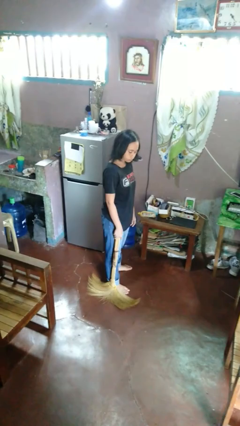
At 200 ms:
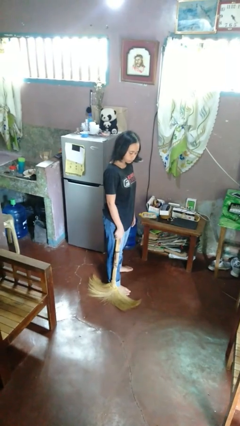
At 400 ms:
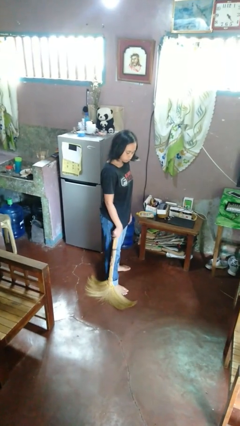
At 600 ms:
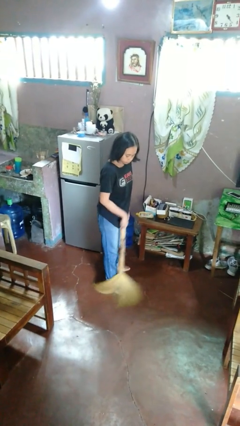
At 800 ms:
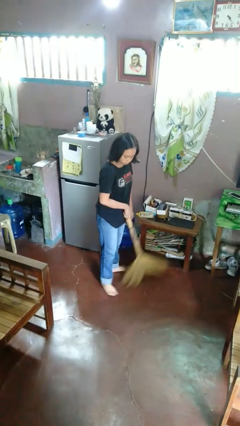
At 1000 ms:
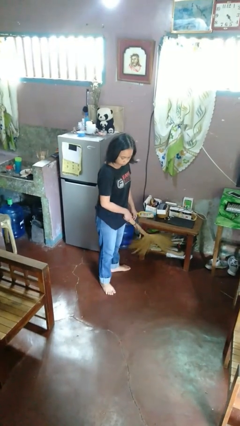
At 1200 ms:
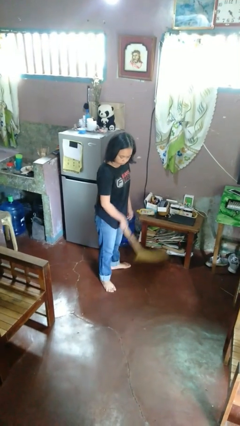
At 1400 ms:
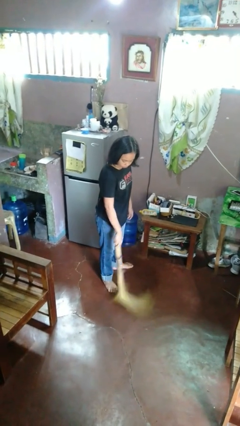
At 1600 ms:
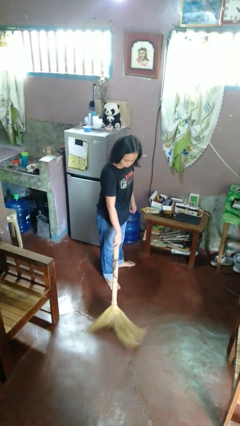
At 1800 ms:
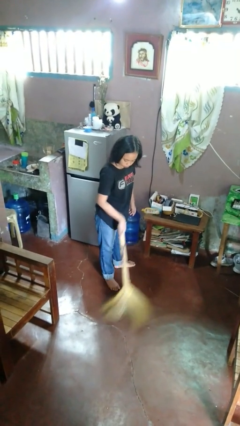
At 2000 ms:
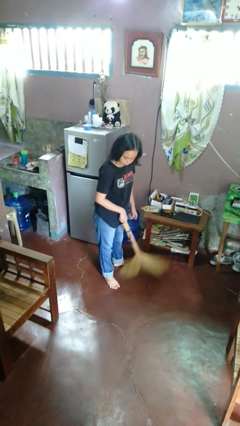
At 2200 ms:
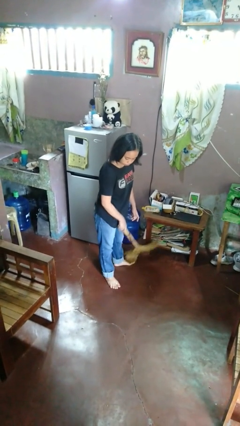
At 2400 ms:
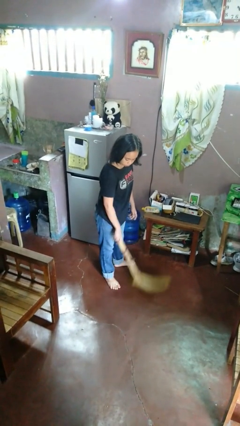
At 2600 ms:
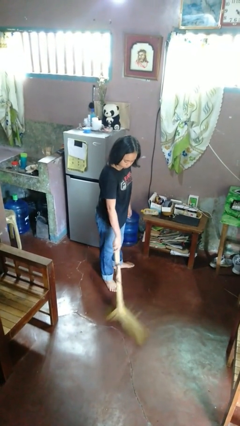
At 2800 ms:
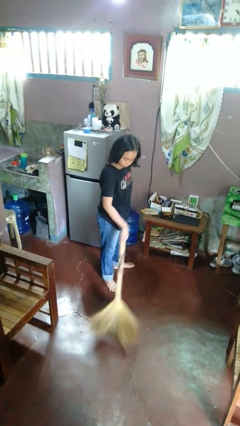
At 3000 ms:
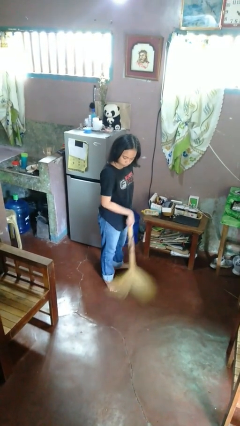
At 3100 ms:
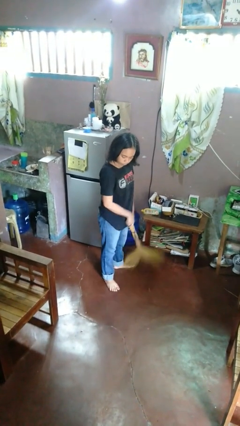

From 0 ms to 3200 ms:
person sweeps floor

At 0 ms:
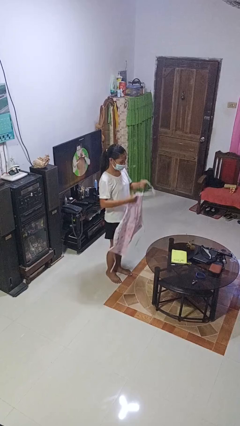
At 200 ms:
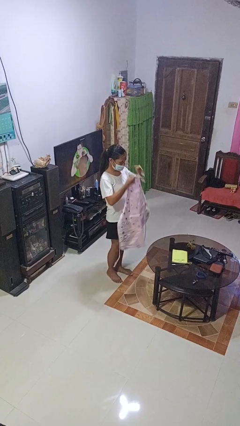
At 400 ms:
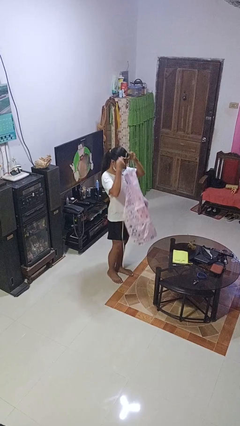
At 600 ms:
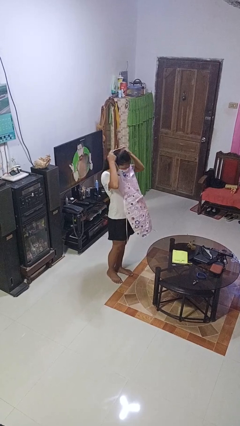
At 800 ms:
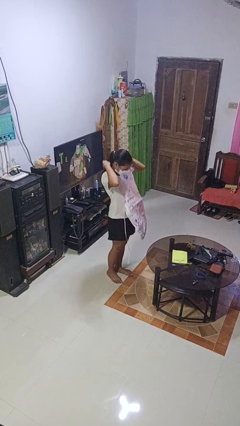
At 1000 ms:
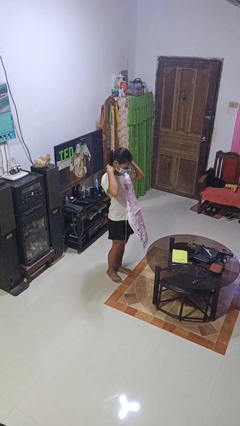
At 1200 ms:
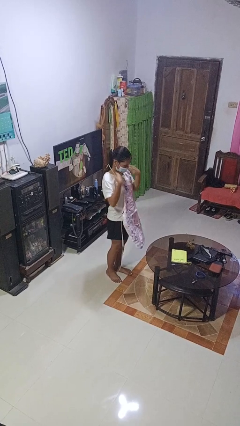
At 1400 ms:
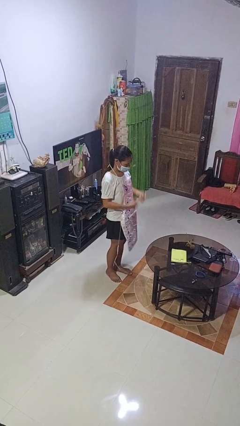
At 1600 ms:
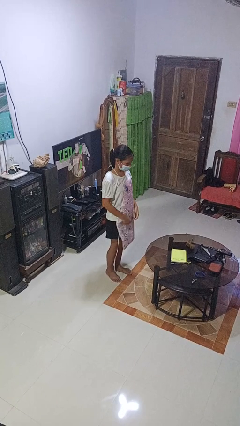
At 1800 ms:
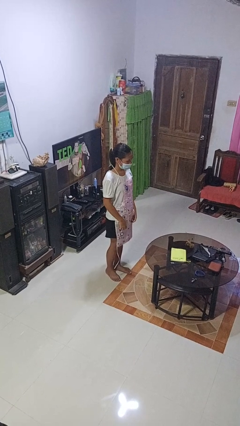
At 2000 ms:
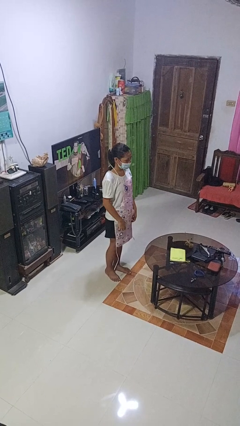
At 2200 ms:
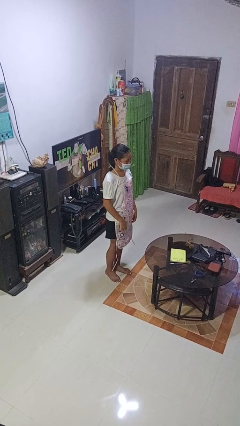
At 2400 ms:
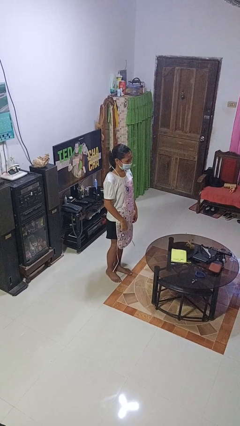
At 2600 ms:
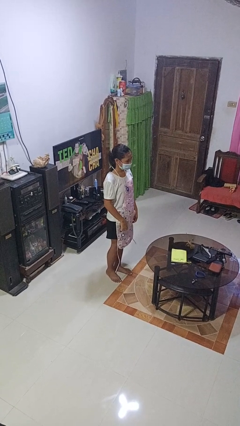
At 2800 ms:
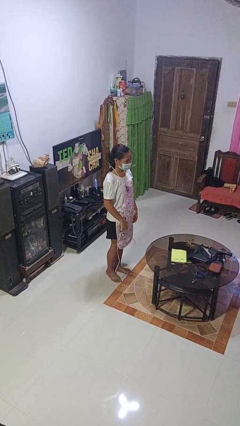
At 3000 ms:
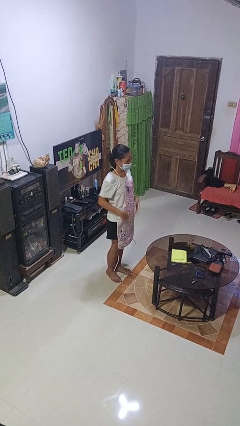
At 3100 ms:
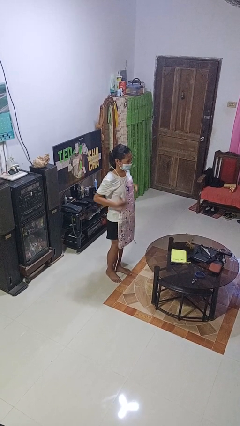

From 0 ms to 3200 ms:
person puts on apron

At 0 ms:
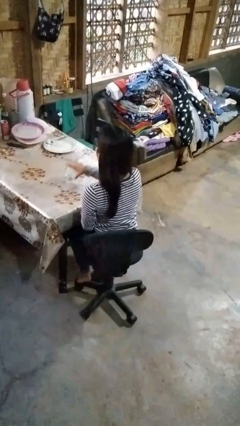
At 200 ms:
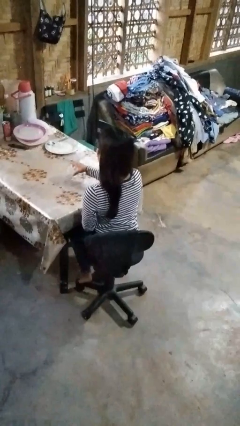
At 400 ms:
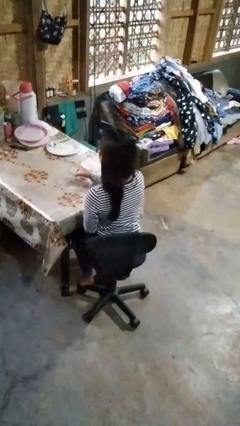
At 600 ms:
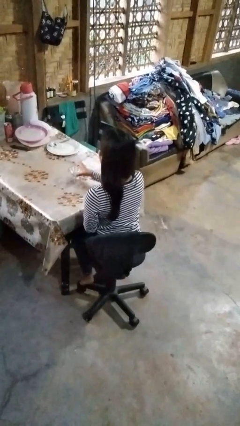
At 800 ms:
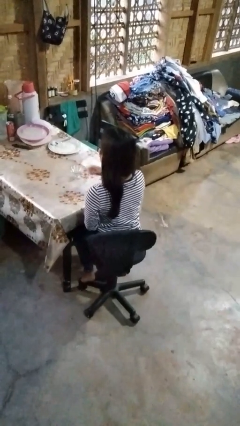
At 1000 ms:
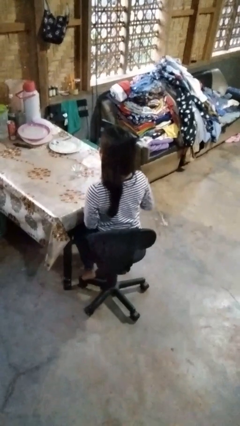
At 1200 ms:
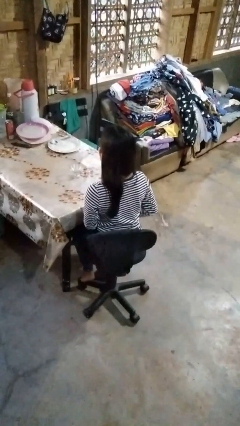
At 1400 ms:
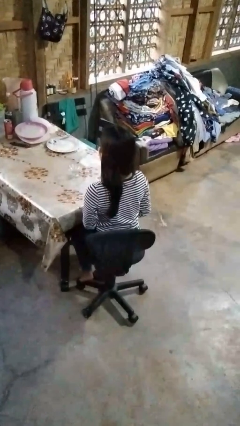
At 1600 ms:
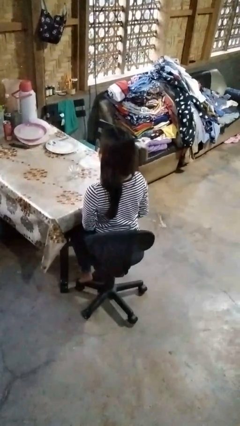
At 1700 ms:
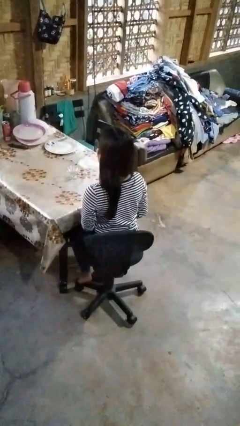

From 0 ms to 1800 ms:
person sets upright glass

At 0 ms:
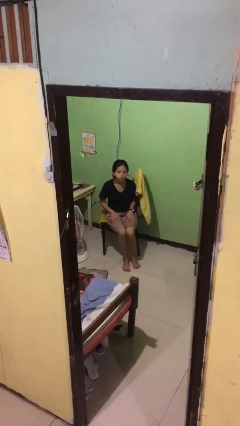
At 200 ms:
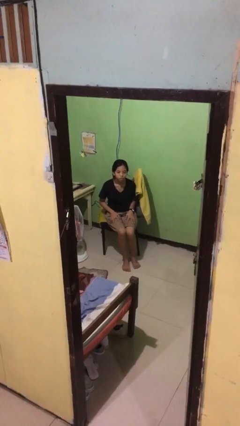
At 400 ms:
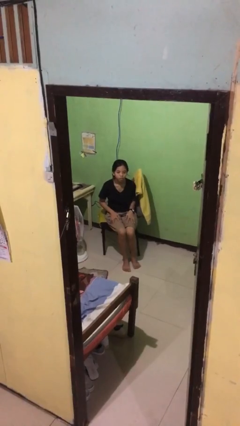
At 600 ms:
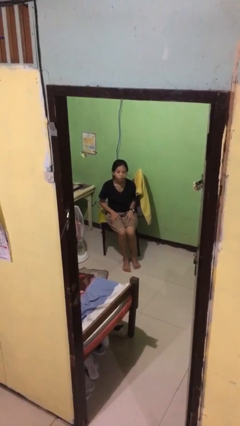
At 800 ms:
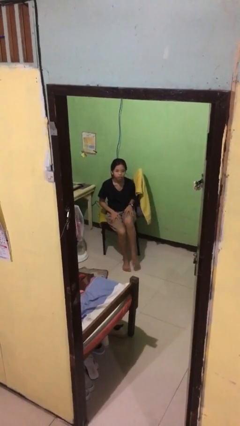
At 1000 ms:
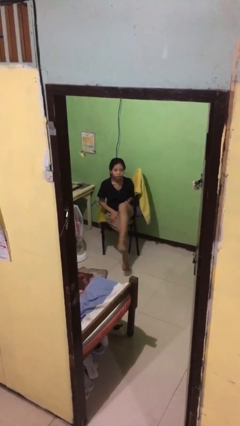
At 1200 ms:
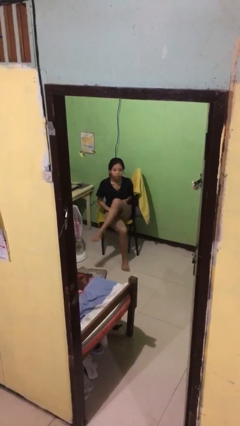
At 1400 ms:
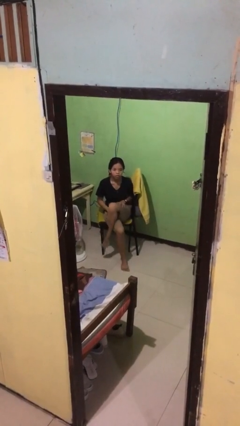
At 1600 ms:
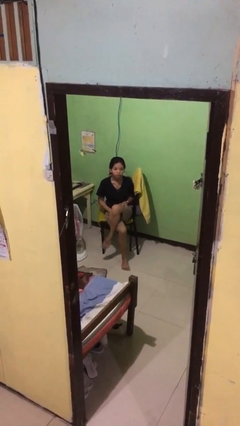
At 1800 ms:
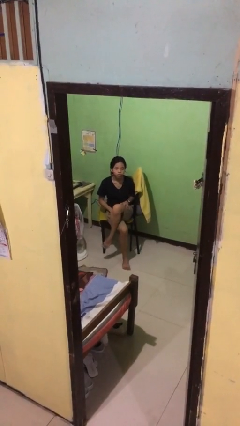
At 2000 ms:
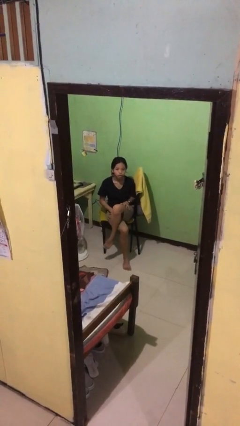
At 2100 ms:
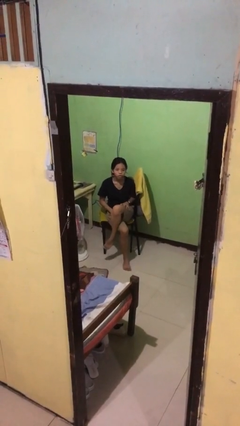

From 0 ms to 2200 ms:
person crosses legs

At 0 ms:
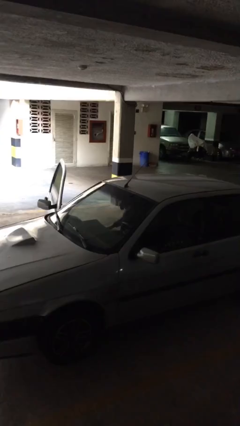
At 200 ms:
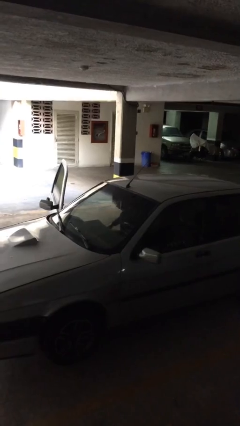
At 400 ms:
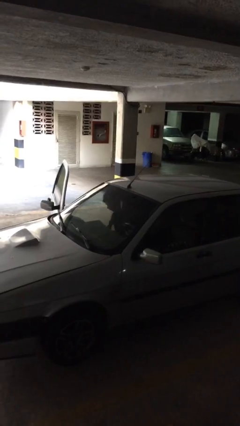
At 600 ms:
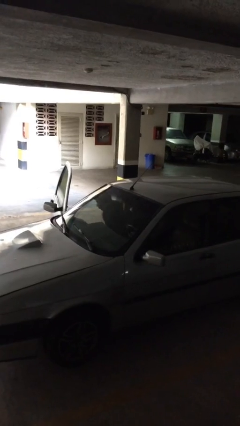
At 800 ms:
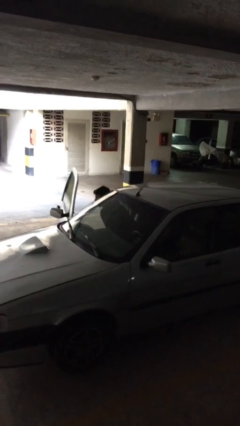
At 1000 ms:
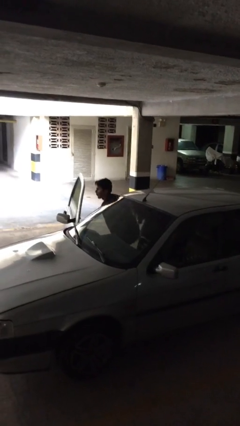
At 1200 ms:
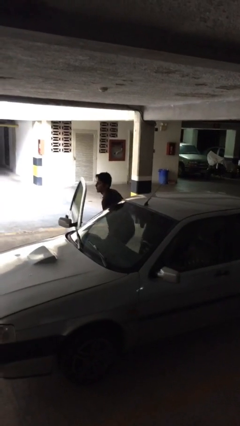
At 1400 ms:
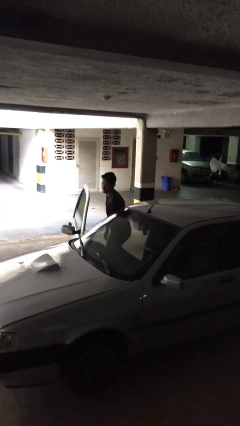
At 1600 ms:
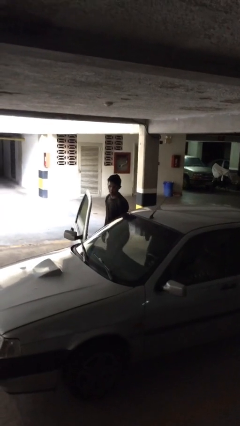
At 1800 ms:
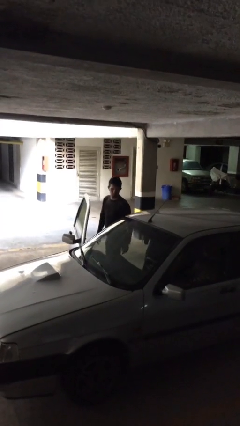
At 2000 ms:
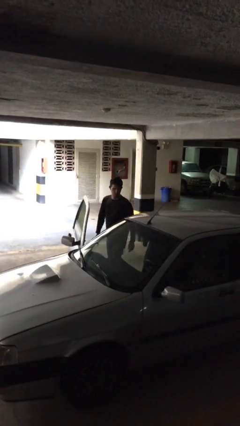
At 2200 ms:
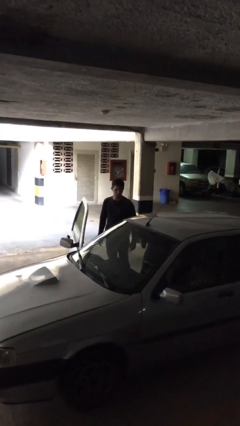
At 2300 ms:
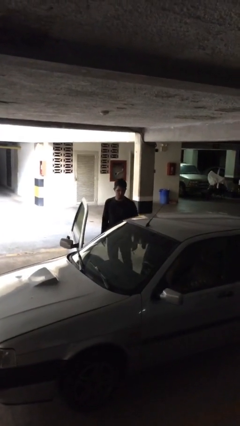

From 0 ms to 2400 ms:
person exits car

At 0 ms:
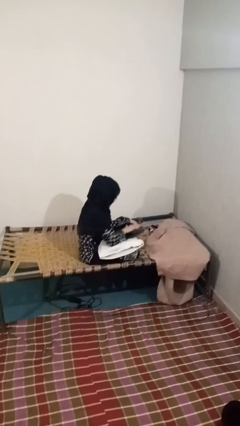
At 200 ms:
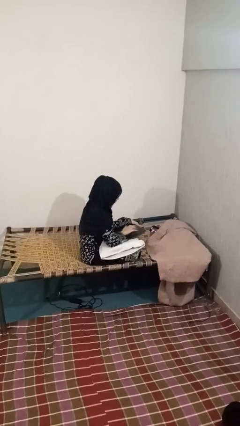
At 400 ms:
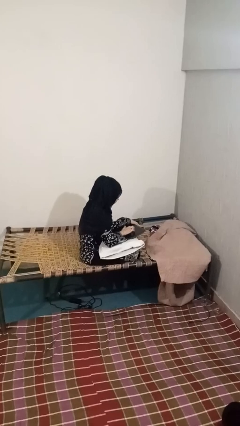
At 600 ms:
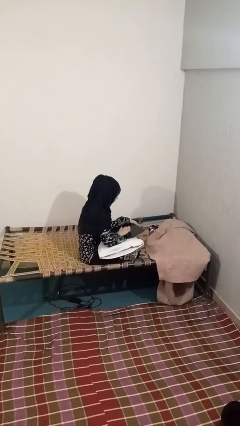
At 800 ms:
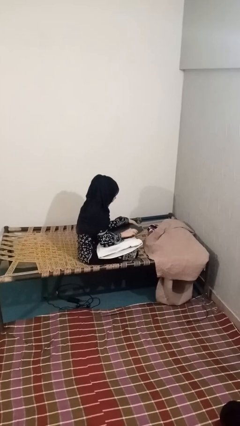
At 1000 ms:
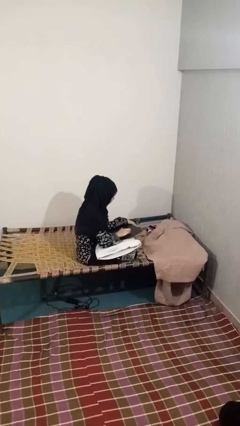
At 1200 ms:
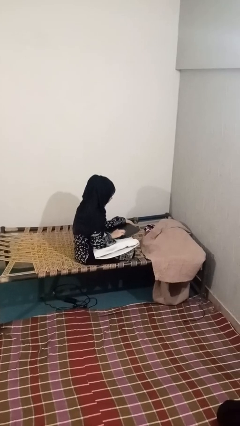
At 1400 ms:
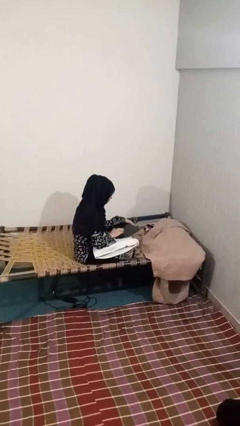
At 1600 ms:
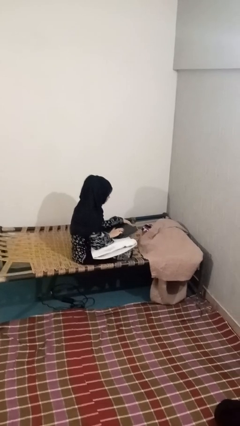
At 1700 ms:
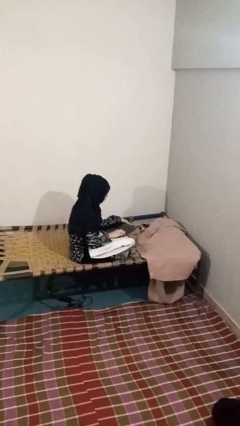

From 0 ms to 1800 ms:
person interacts with tablet

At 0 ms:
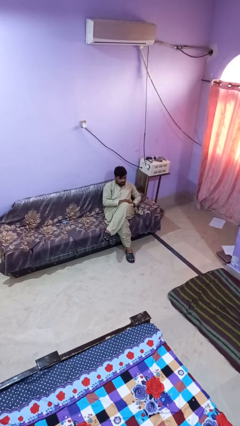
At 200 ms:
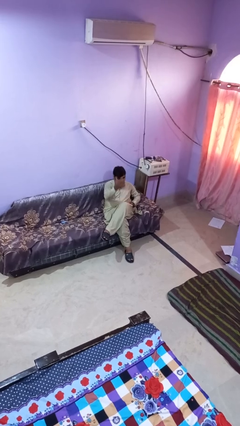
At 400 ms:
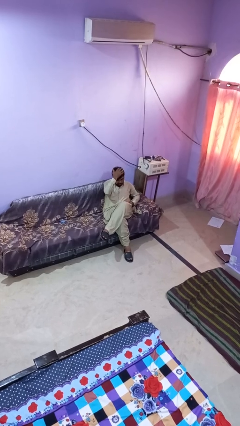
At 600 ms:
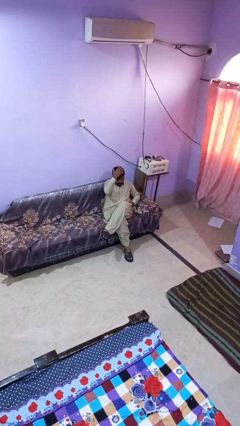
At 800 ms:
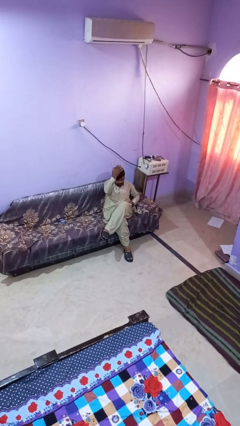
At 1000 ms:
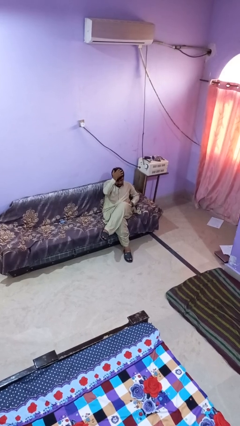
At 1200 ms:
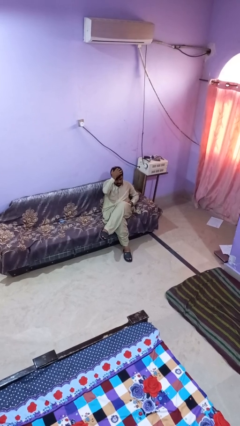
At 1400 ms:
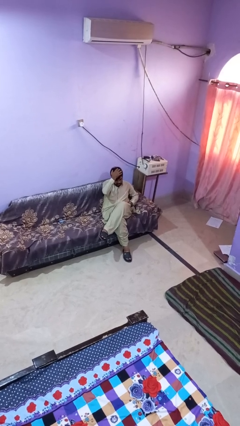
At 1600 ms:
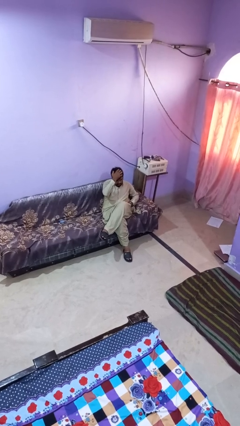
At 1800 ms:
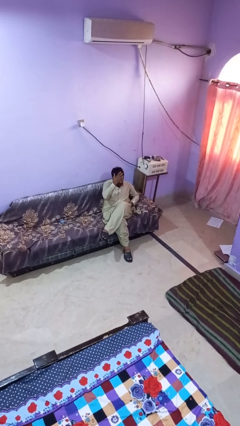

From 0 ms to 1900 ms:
person pats head

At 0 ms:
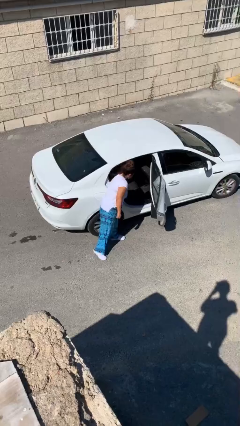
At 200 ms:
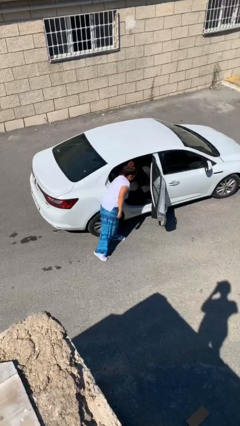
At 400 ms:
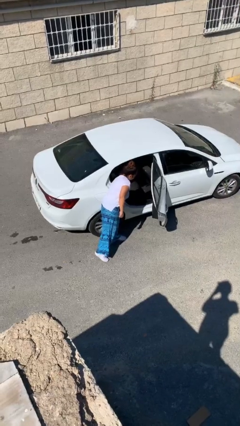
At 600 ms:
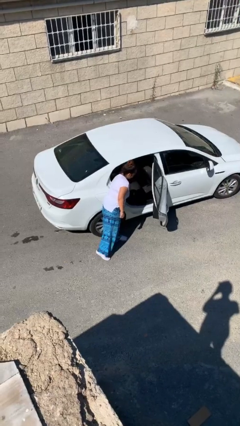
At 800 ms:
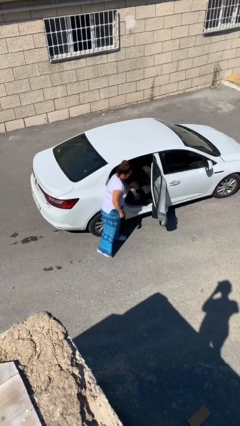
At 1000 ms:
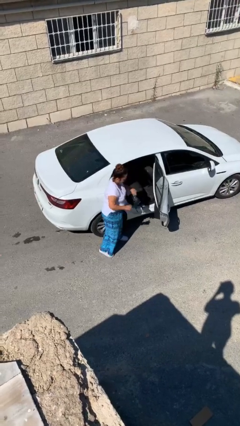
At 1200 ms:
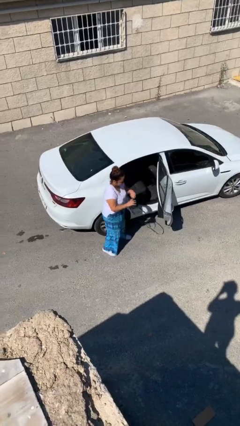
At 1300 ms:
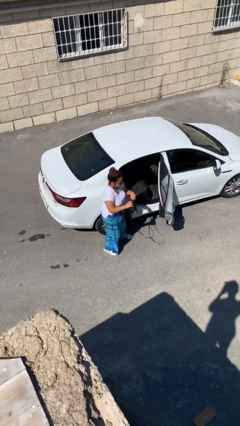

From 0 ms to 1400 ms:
person unloads car
